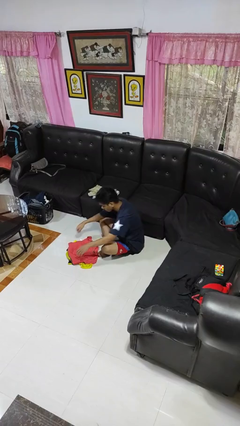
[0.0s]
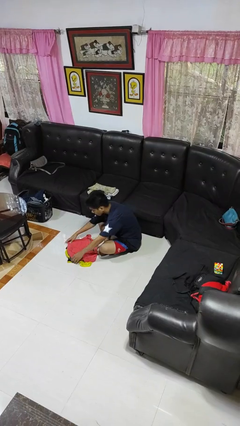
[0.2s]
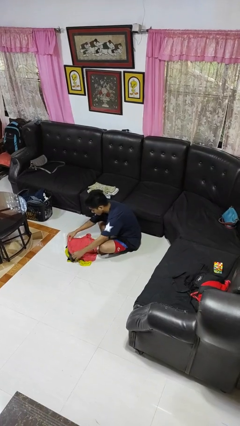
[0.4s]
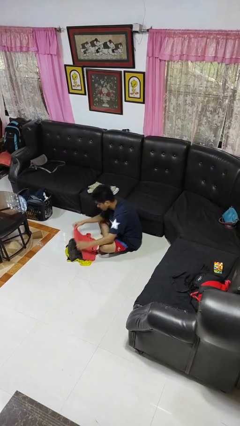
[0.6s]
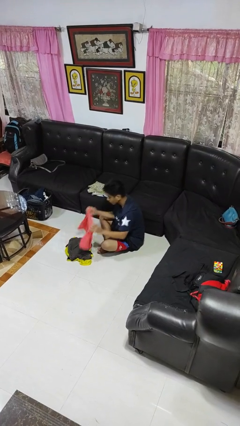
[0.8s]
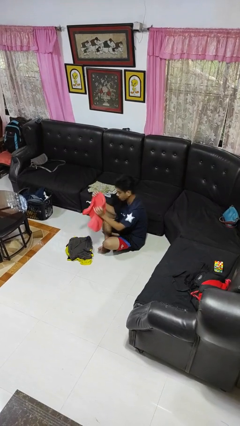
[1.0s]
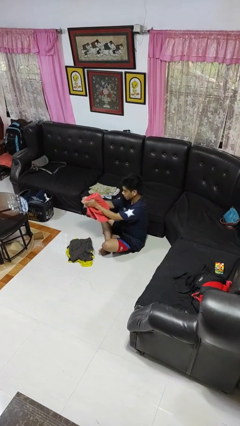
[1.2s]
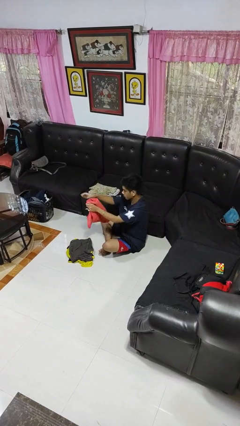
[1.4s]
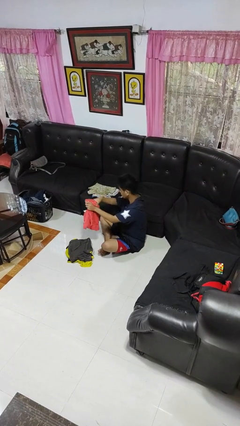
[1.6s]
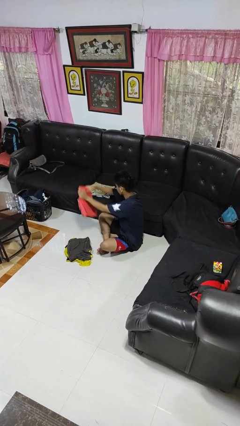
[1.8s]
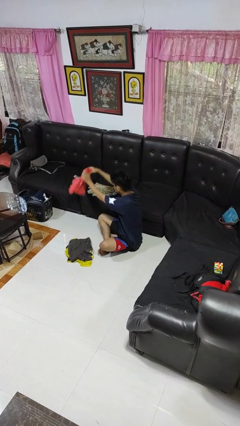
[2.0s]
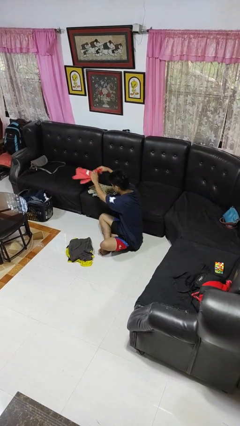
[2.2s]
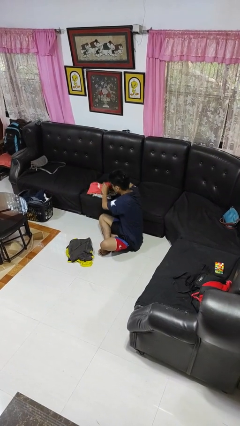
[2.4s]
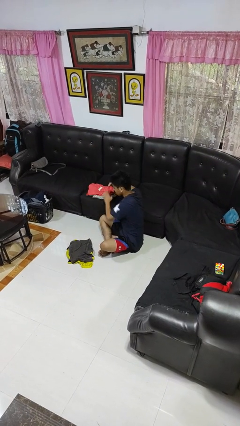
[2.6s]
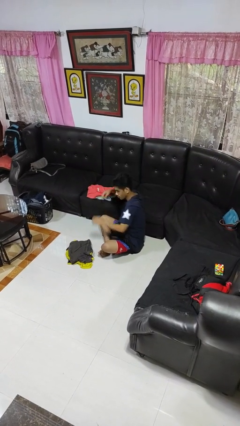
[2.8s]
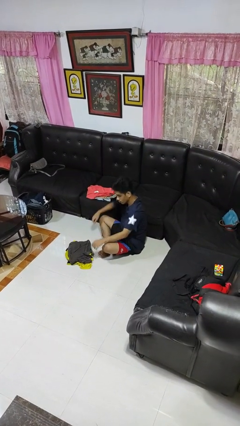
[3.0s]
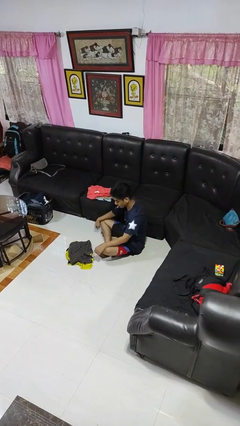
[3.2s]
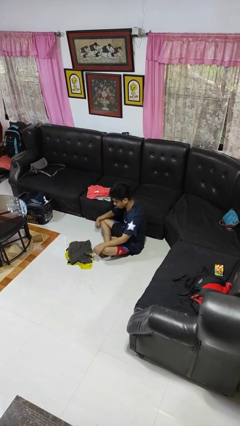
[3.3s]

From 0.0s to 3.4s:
person folds shirt

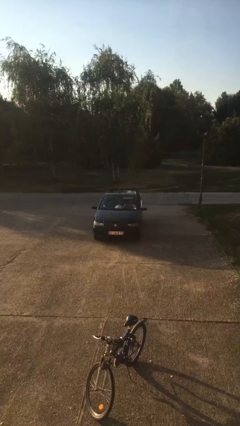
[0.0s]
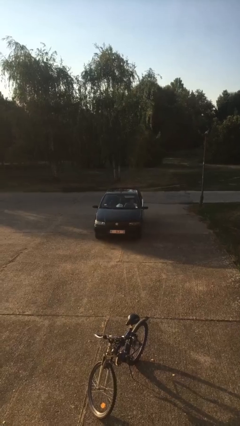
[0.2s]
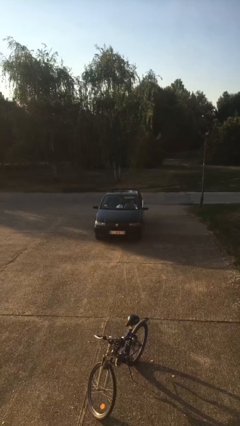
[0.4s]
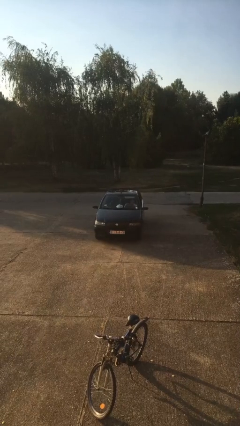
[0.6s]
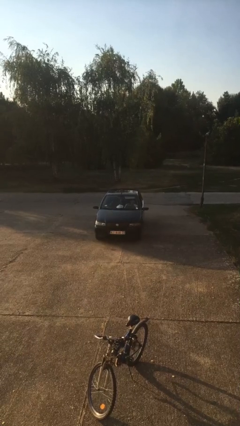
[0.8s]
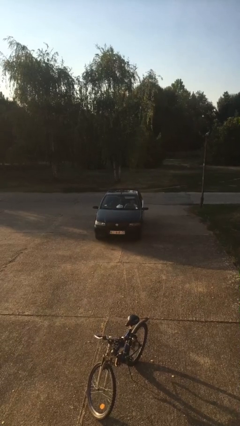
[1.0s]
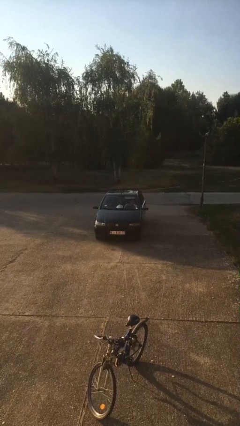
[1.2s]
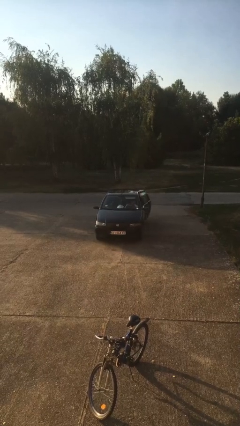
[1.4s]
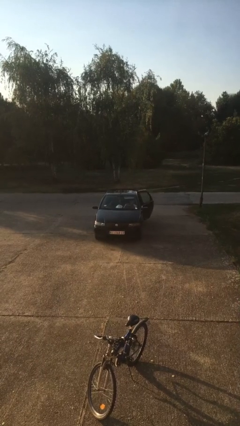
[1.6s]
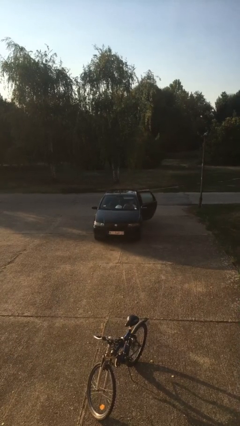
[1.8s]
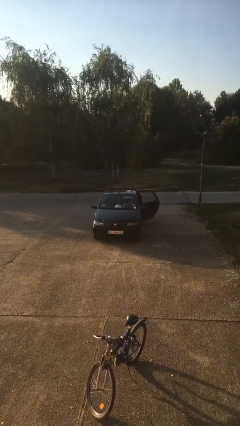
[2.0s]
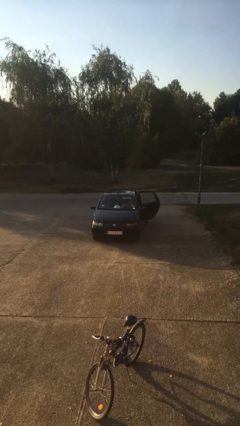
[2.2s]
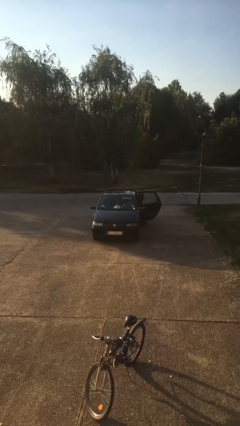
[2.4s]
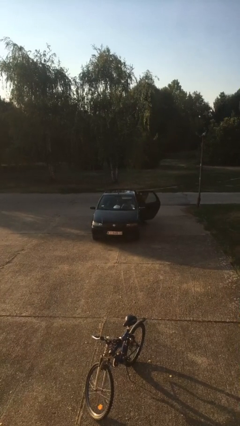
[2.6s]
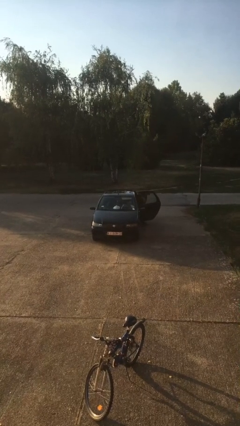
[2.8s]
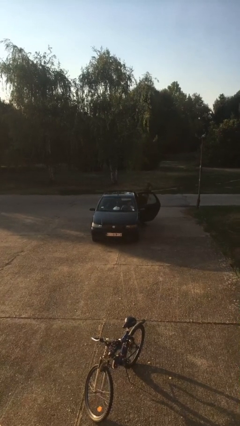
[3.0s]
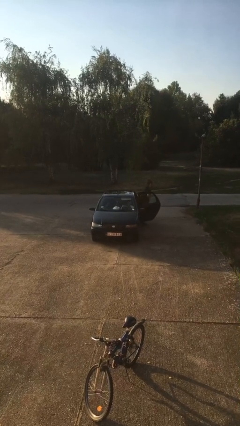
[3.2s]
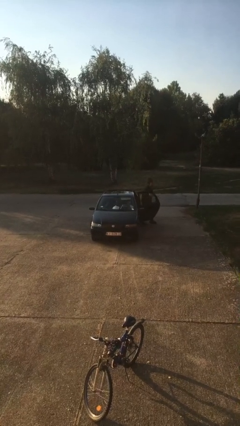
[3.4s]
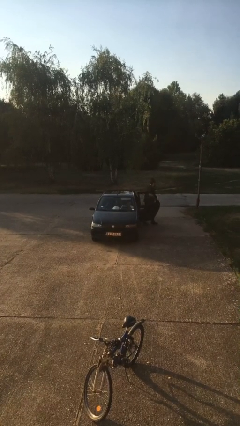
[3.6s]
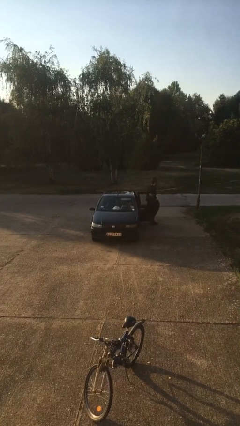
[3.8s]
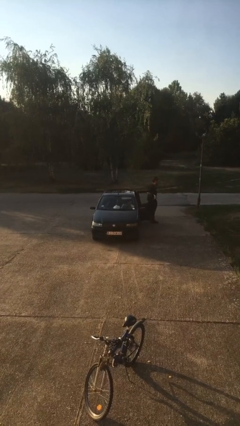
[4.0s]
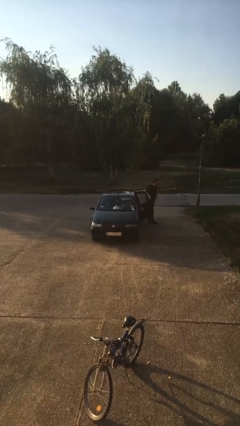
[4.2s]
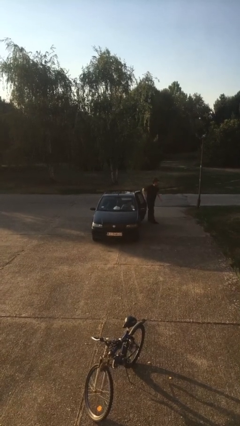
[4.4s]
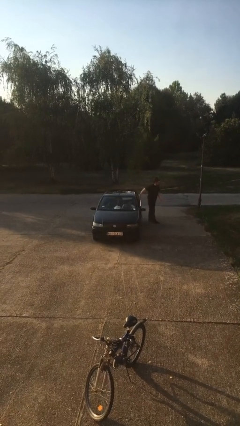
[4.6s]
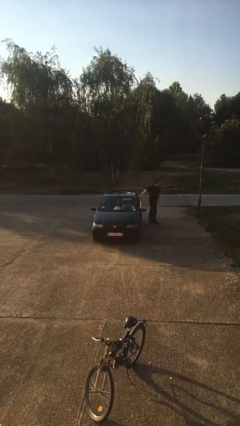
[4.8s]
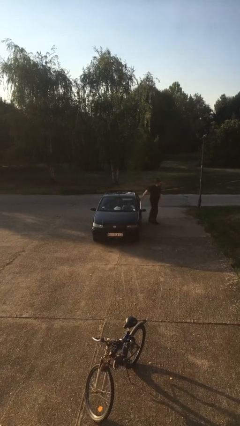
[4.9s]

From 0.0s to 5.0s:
car drops off person

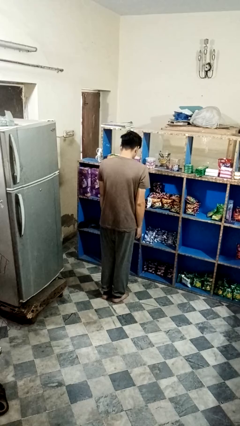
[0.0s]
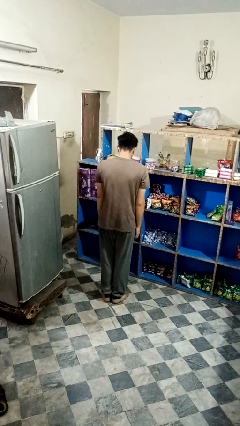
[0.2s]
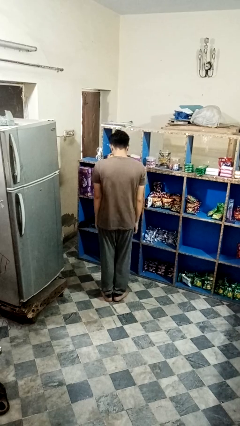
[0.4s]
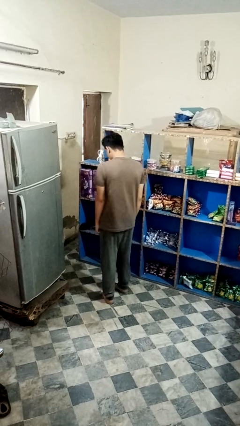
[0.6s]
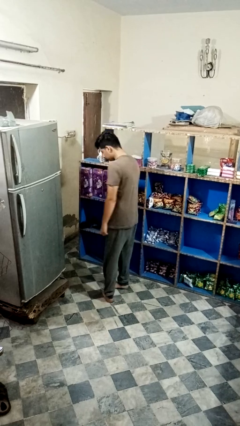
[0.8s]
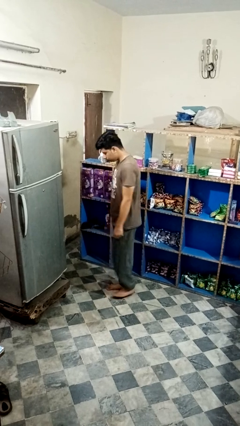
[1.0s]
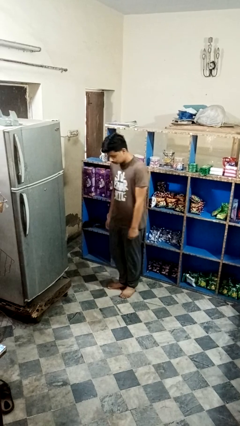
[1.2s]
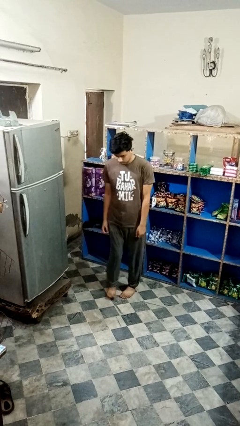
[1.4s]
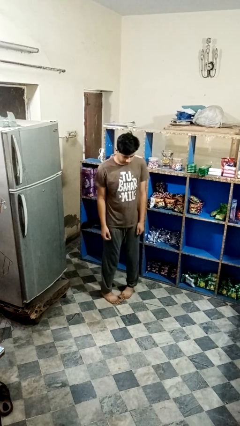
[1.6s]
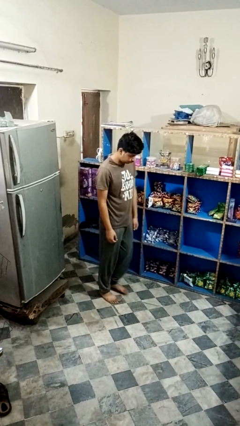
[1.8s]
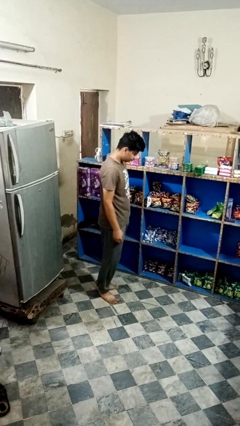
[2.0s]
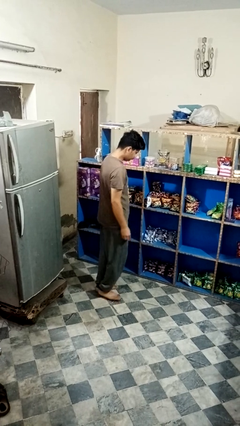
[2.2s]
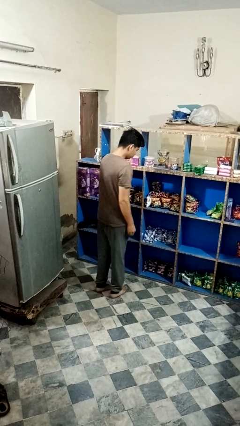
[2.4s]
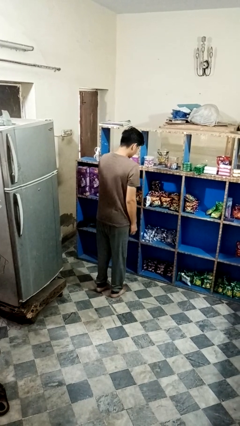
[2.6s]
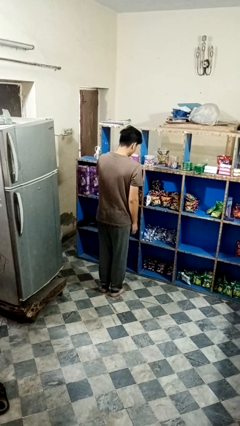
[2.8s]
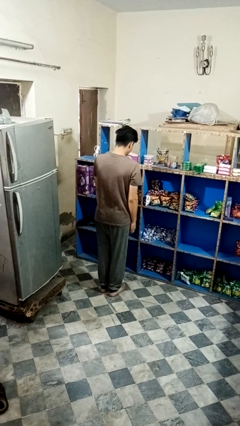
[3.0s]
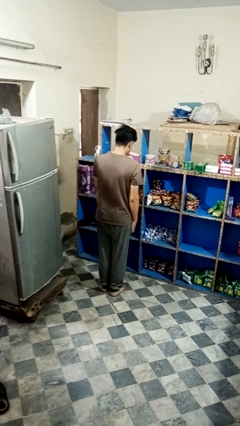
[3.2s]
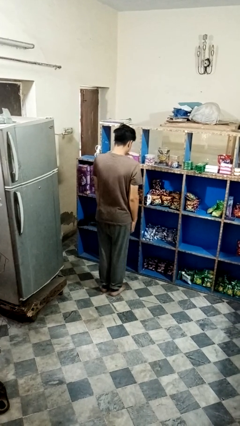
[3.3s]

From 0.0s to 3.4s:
person twirls

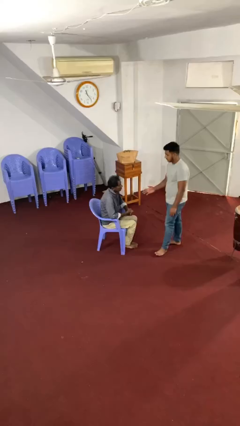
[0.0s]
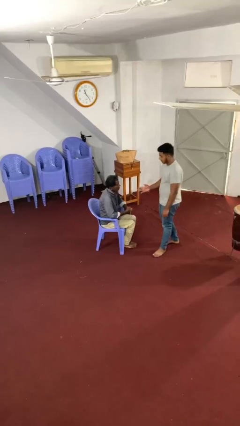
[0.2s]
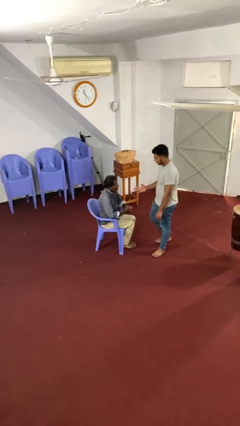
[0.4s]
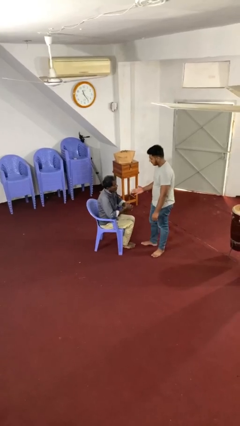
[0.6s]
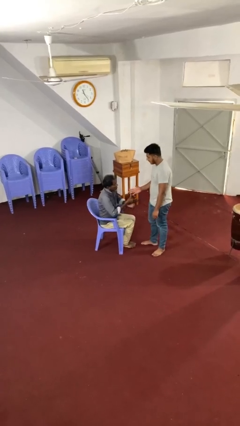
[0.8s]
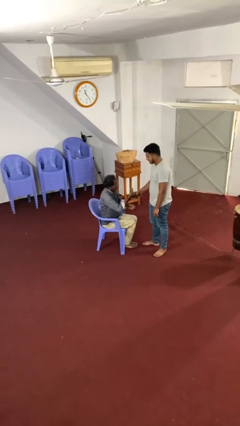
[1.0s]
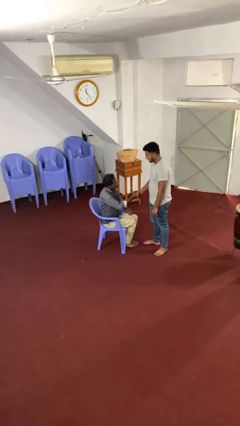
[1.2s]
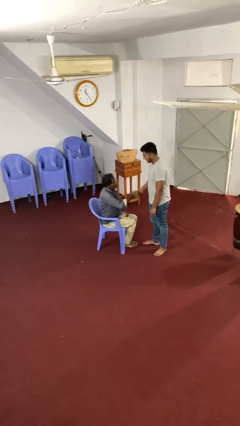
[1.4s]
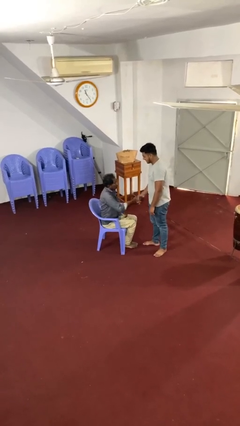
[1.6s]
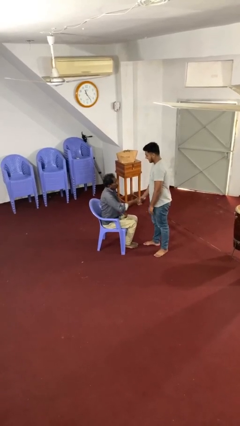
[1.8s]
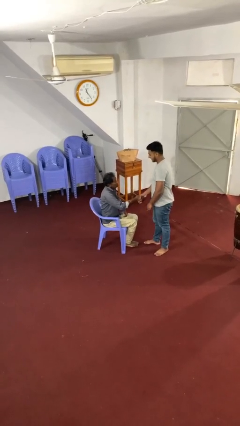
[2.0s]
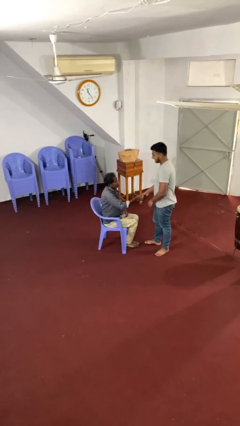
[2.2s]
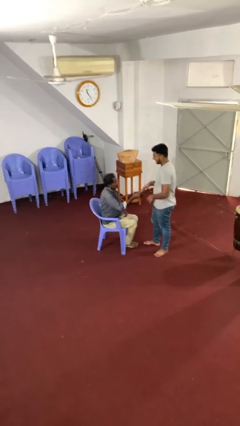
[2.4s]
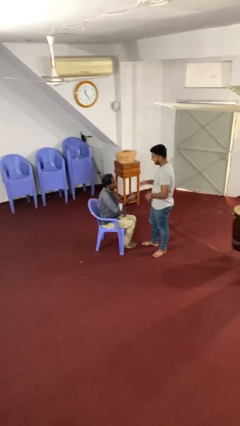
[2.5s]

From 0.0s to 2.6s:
person shakes hand

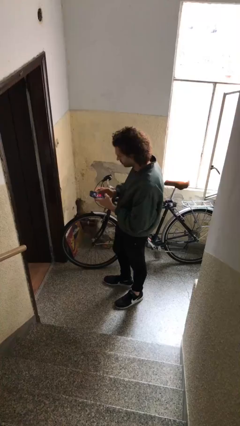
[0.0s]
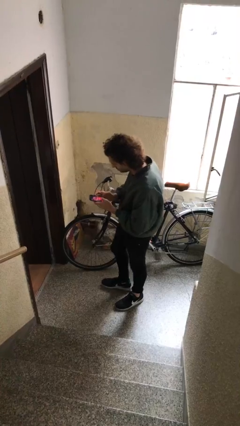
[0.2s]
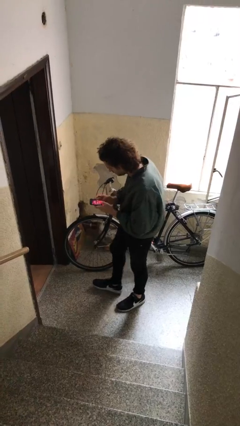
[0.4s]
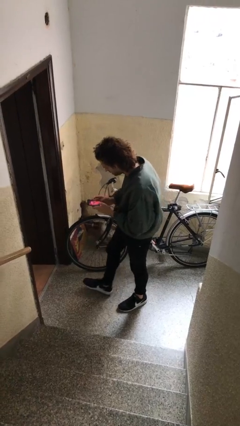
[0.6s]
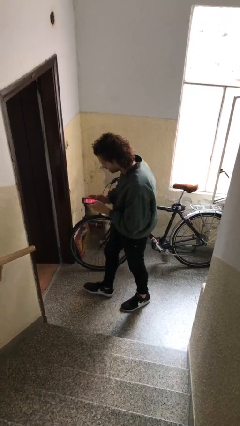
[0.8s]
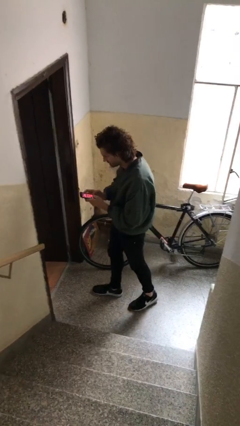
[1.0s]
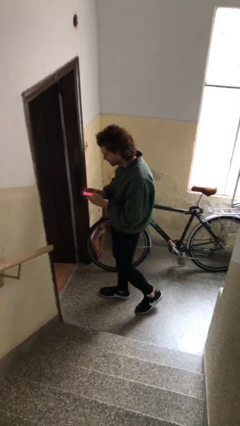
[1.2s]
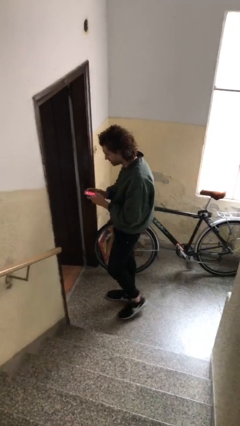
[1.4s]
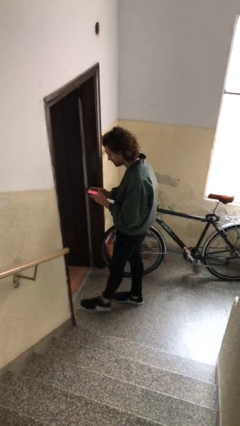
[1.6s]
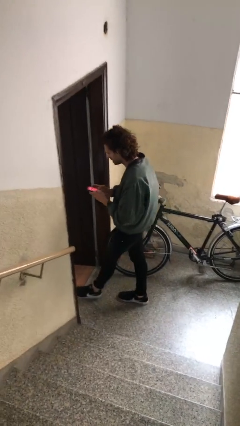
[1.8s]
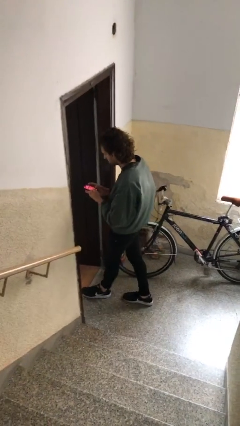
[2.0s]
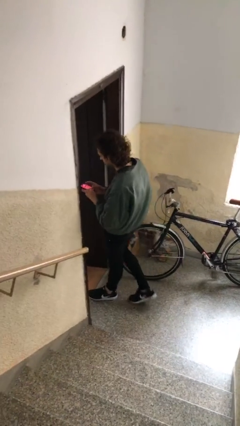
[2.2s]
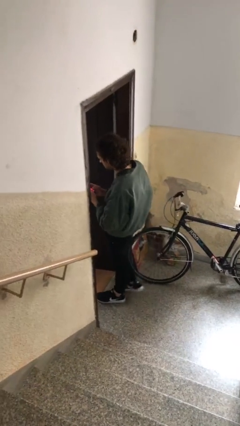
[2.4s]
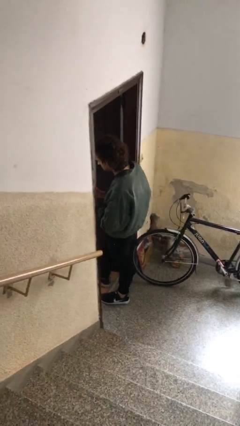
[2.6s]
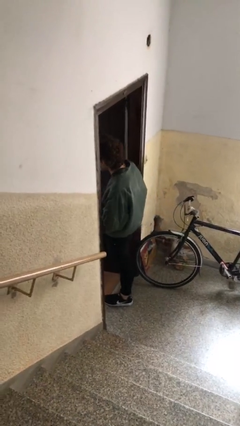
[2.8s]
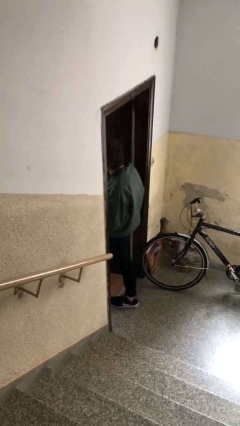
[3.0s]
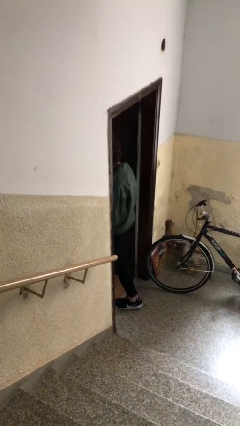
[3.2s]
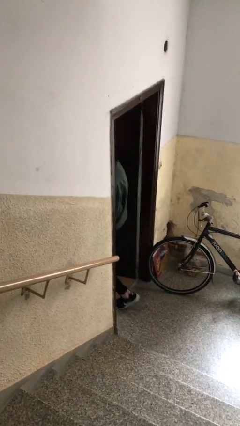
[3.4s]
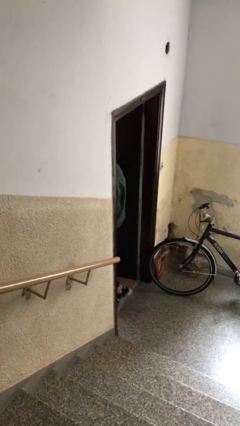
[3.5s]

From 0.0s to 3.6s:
person exits scene through structure
